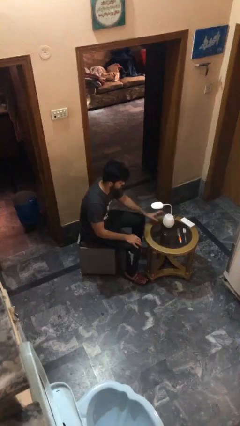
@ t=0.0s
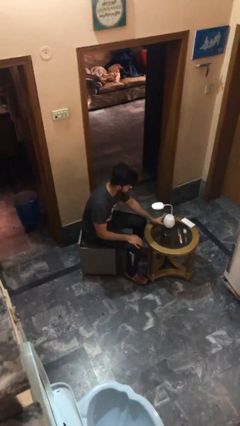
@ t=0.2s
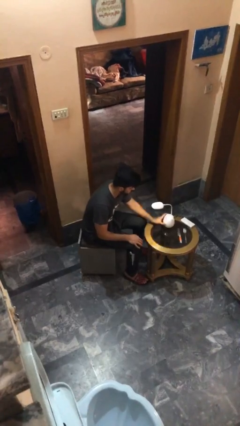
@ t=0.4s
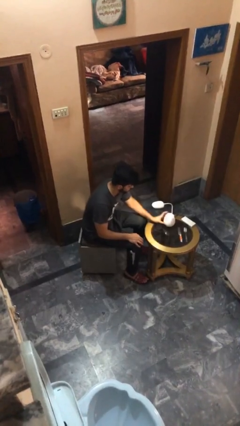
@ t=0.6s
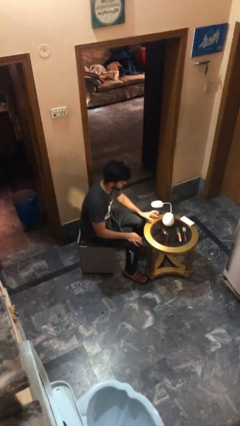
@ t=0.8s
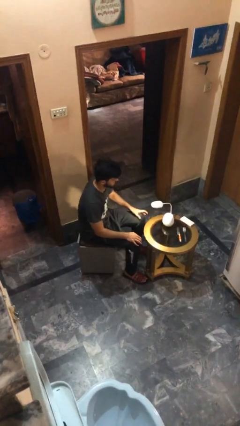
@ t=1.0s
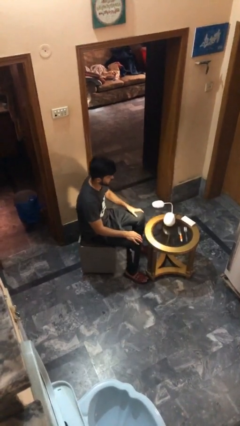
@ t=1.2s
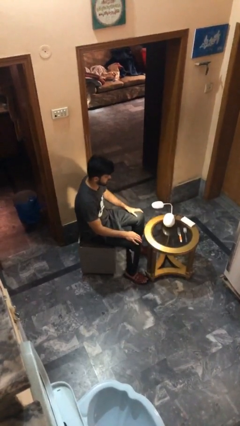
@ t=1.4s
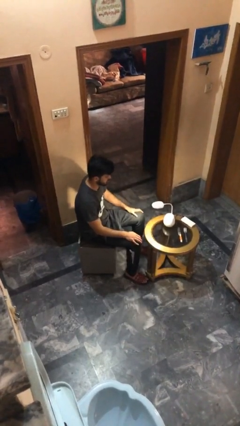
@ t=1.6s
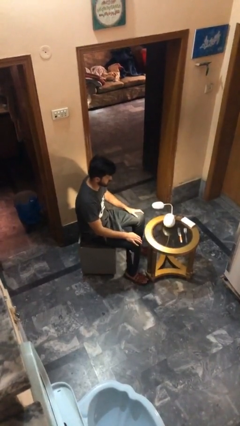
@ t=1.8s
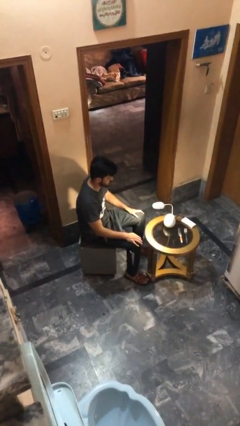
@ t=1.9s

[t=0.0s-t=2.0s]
person turns on lamp

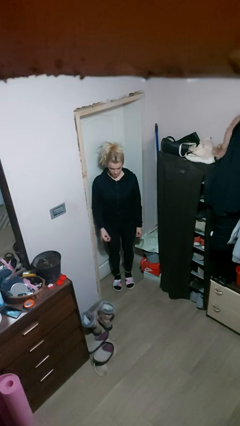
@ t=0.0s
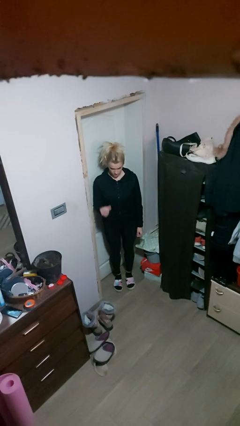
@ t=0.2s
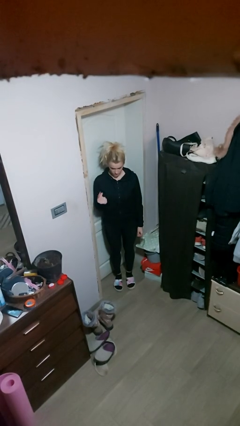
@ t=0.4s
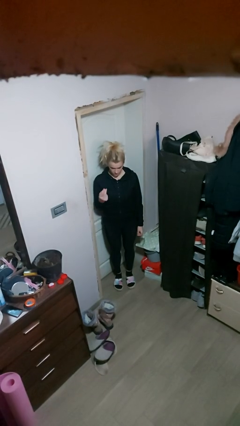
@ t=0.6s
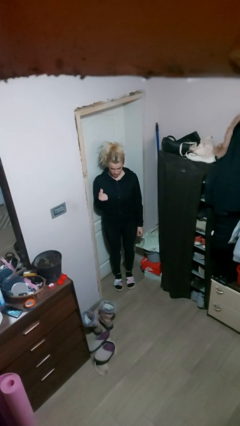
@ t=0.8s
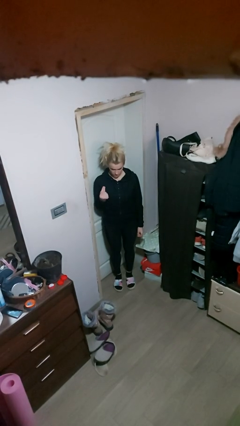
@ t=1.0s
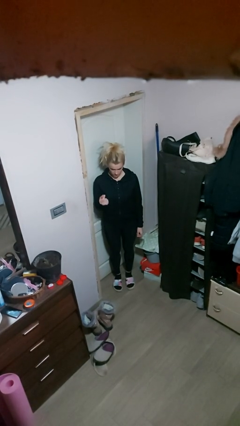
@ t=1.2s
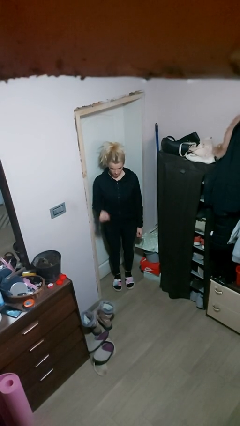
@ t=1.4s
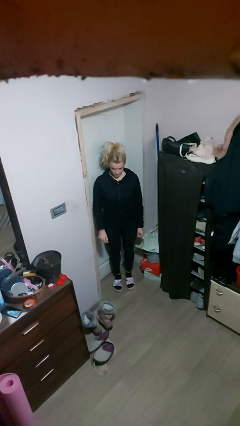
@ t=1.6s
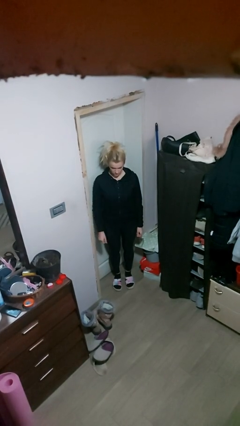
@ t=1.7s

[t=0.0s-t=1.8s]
person snaps fingers

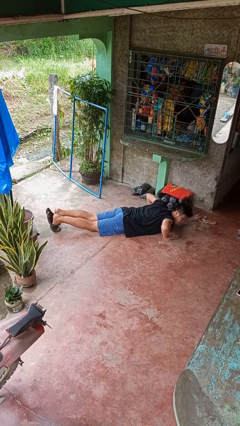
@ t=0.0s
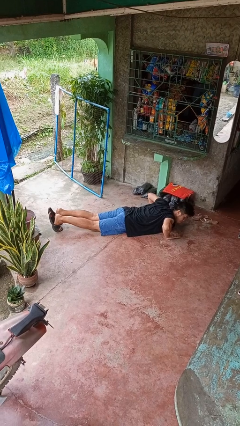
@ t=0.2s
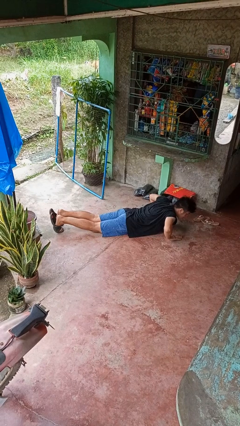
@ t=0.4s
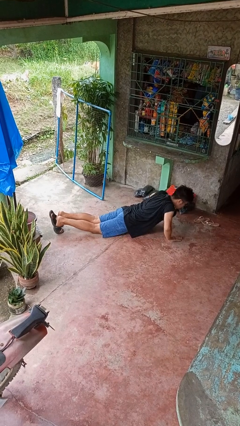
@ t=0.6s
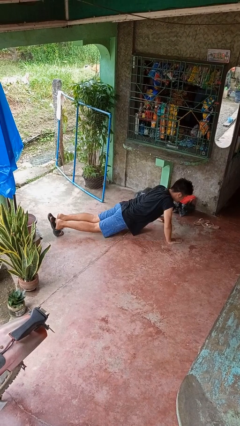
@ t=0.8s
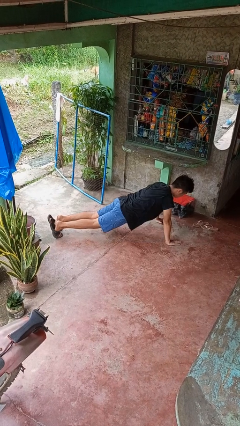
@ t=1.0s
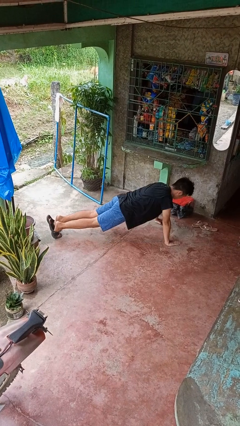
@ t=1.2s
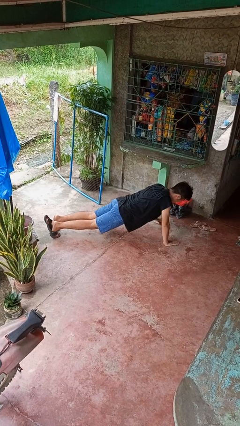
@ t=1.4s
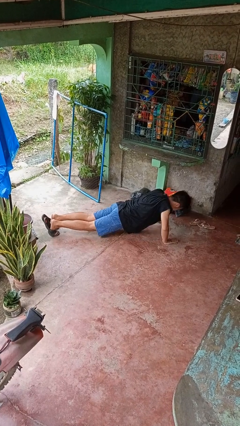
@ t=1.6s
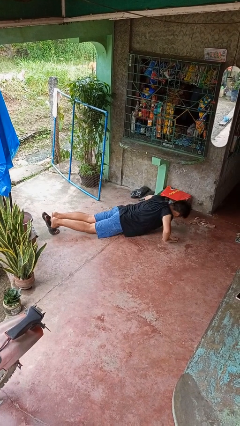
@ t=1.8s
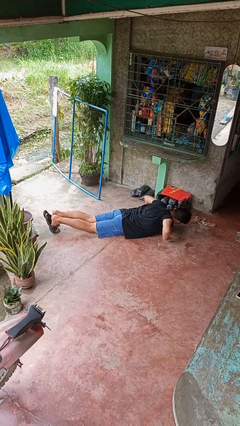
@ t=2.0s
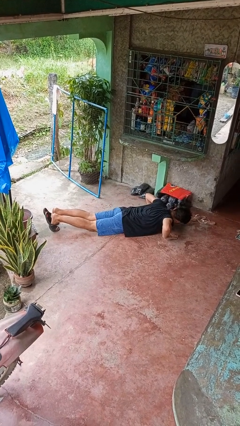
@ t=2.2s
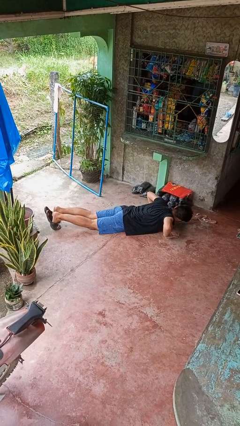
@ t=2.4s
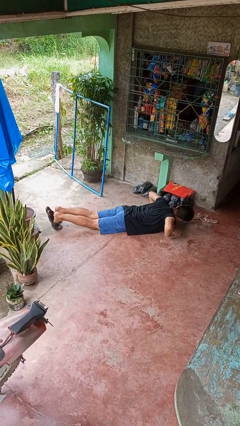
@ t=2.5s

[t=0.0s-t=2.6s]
person exercises with pushup

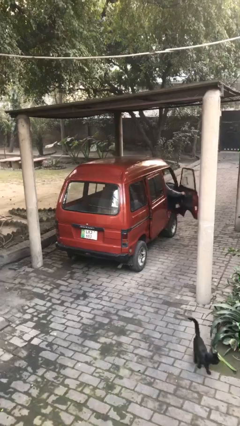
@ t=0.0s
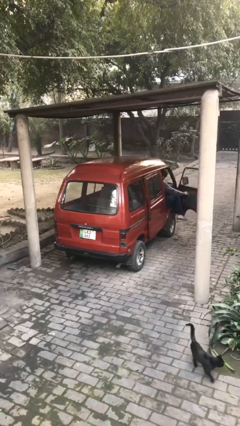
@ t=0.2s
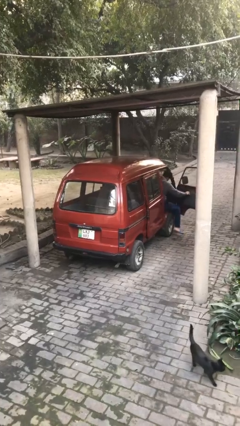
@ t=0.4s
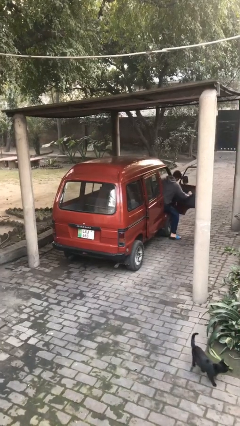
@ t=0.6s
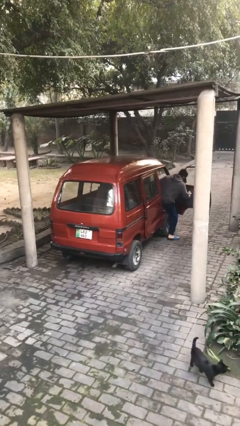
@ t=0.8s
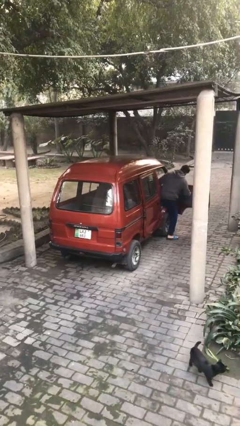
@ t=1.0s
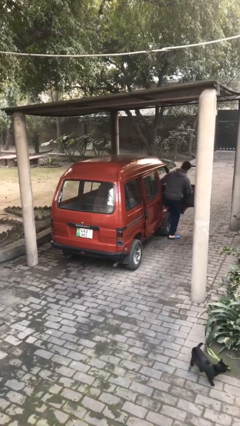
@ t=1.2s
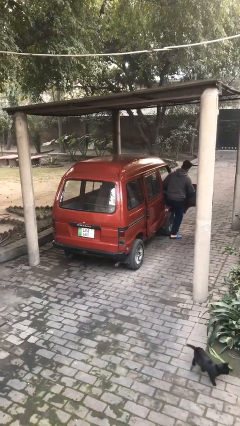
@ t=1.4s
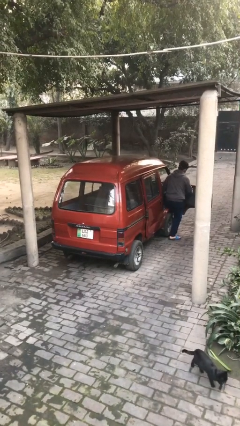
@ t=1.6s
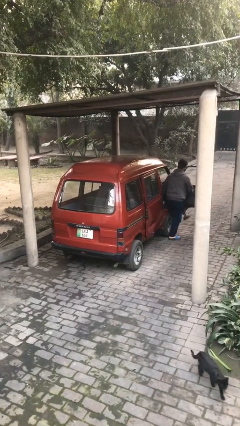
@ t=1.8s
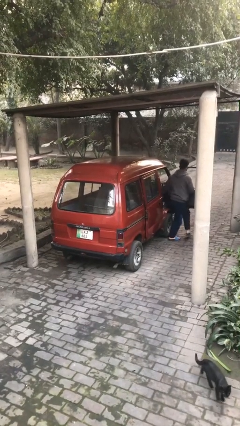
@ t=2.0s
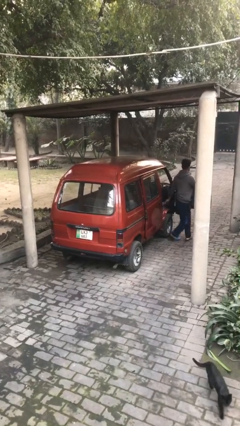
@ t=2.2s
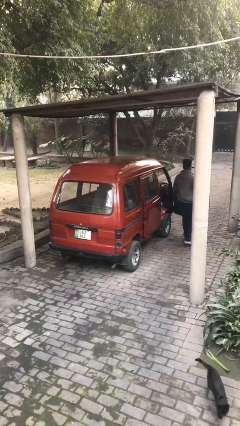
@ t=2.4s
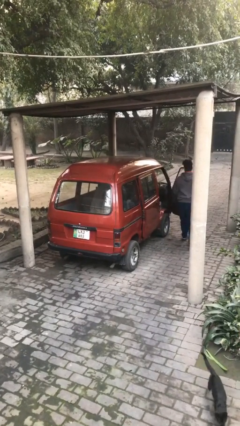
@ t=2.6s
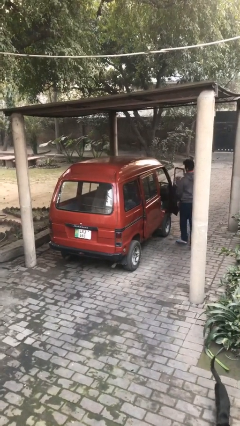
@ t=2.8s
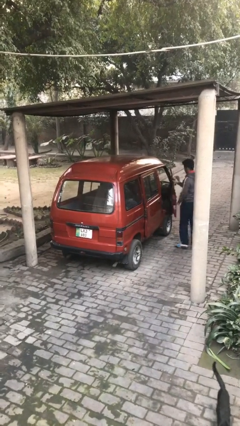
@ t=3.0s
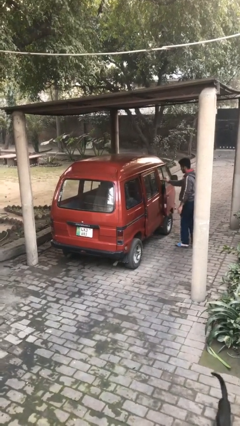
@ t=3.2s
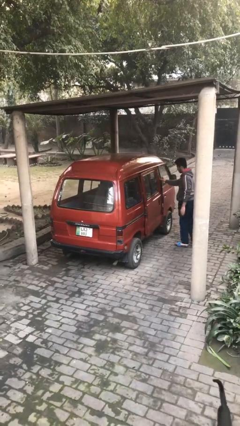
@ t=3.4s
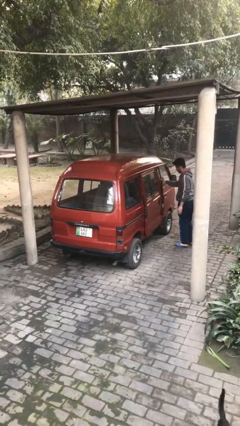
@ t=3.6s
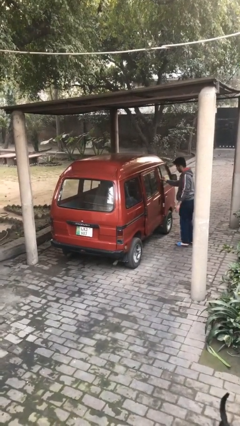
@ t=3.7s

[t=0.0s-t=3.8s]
car drops off person

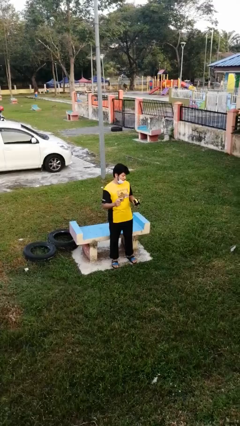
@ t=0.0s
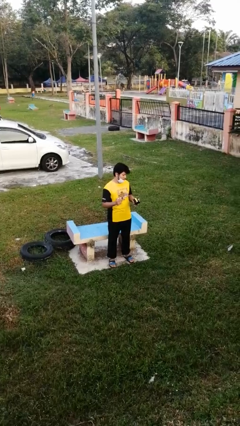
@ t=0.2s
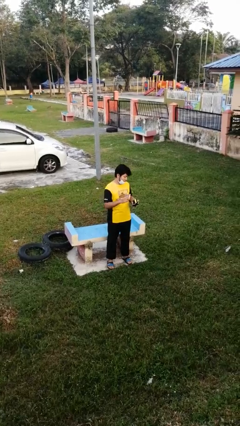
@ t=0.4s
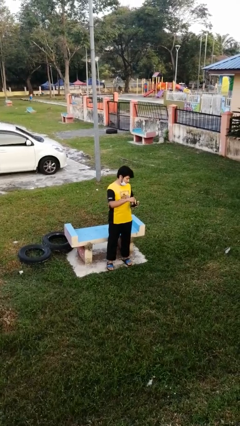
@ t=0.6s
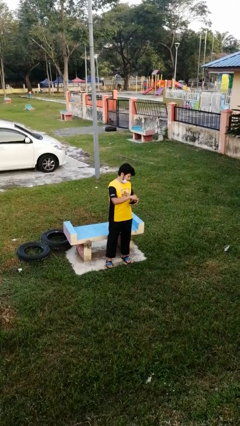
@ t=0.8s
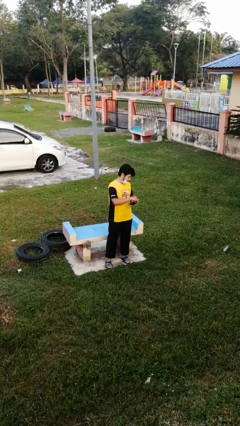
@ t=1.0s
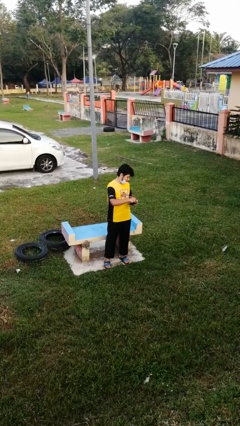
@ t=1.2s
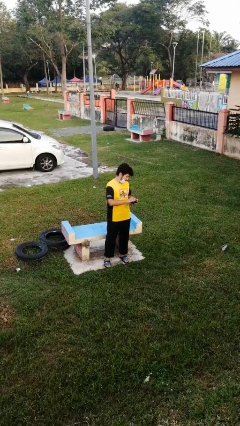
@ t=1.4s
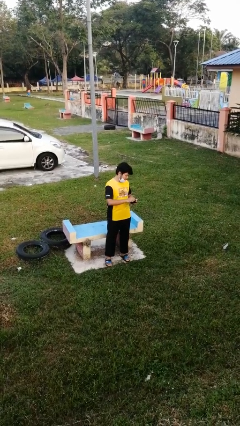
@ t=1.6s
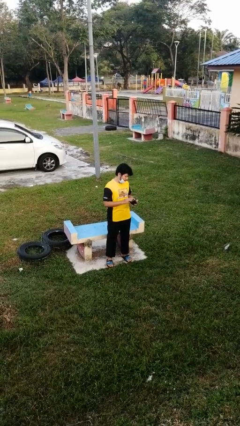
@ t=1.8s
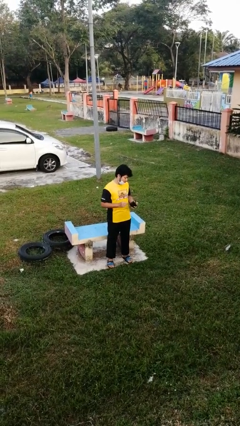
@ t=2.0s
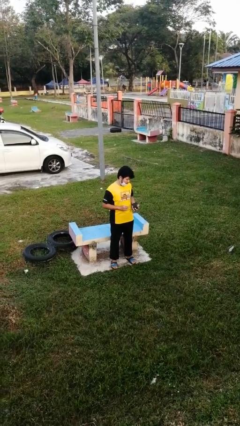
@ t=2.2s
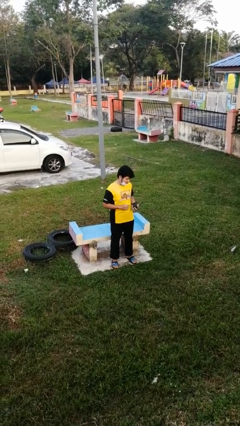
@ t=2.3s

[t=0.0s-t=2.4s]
person puts object into purse

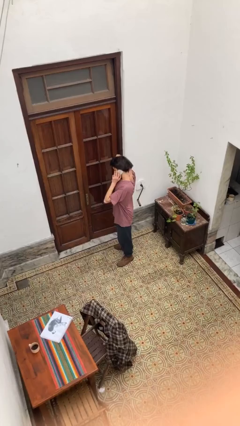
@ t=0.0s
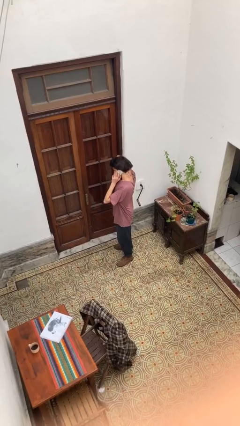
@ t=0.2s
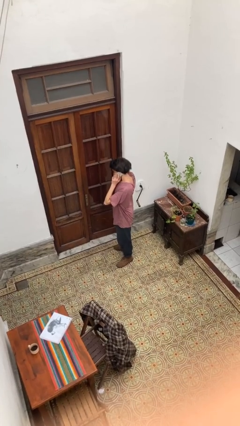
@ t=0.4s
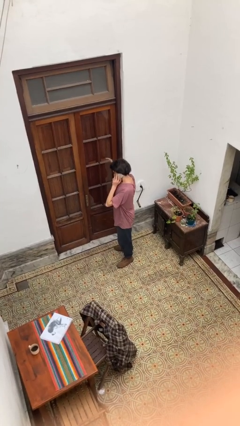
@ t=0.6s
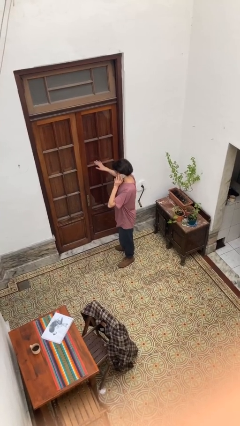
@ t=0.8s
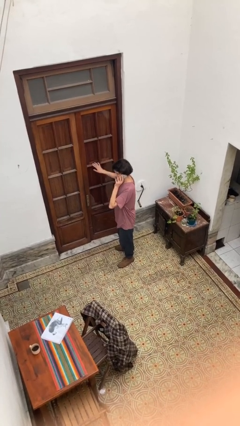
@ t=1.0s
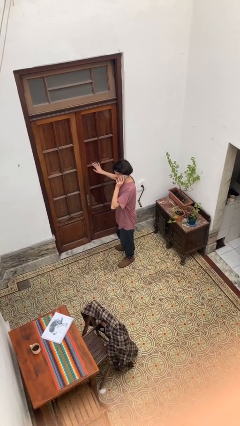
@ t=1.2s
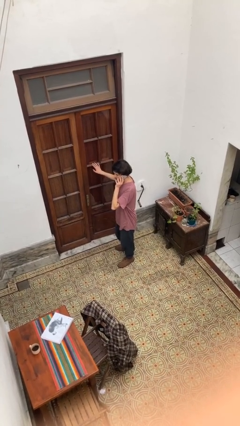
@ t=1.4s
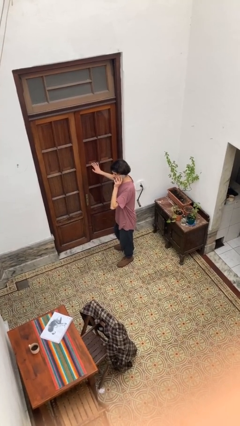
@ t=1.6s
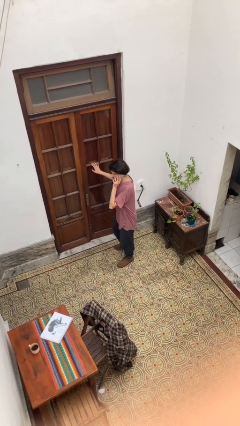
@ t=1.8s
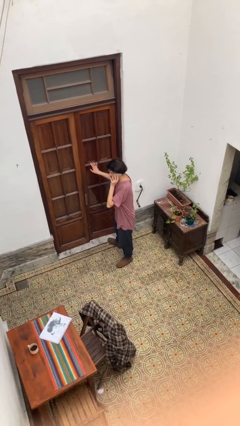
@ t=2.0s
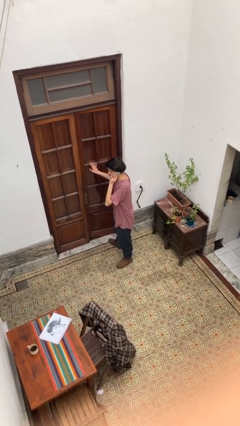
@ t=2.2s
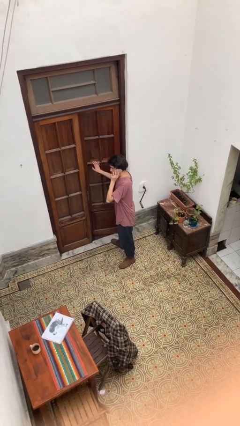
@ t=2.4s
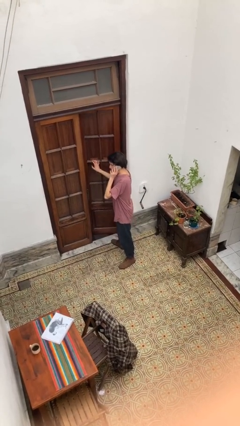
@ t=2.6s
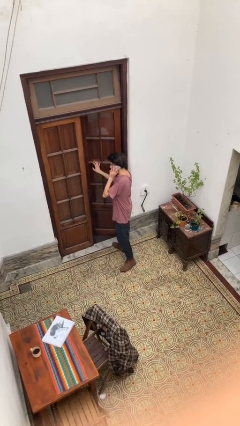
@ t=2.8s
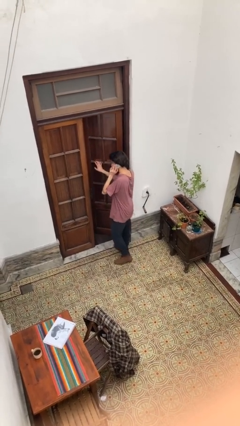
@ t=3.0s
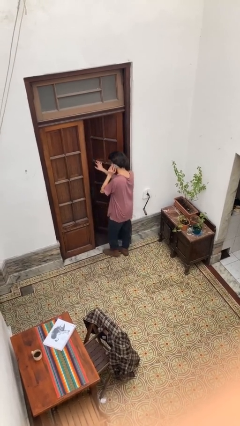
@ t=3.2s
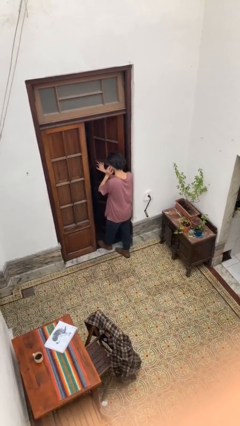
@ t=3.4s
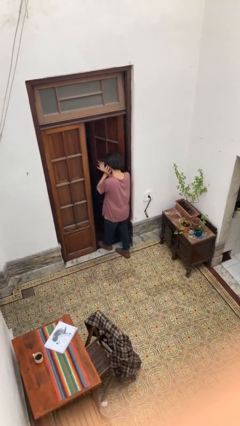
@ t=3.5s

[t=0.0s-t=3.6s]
person opens facility door

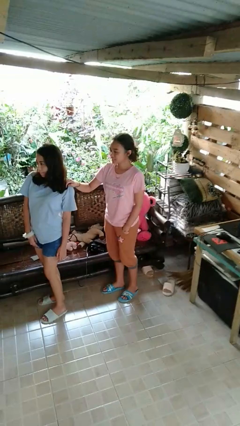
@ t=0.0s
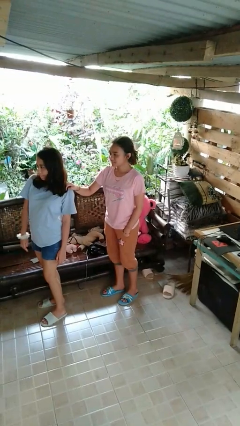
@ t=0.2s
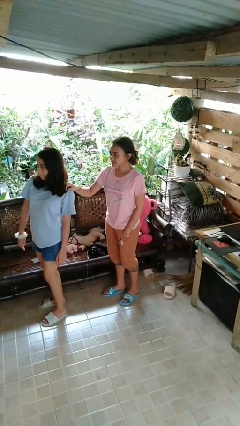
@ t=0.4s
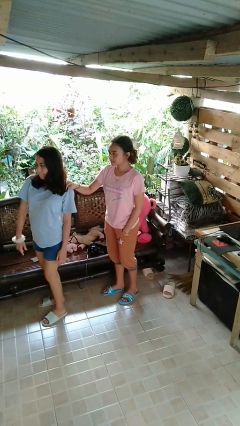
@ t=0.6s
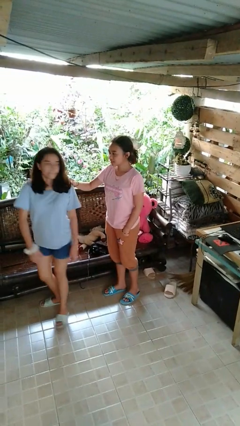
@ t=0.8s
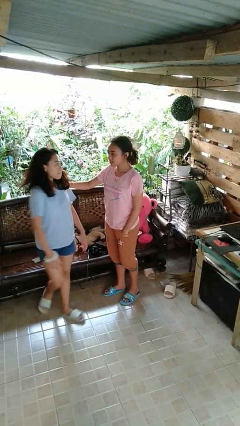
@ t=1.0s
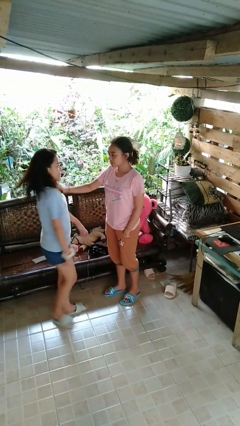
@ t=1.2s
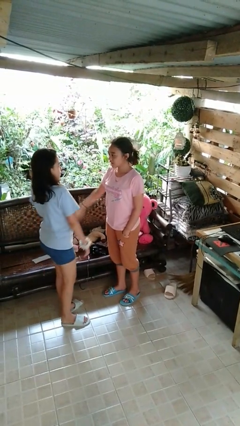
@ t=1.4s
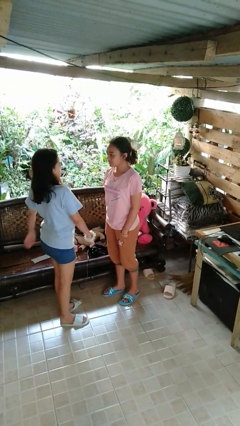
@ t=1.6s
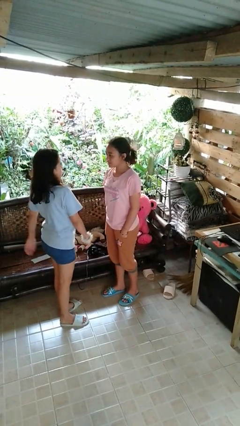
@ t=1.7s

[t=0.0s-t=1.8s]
person spins person around
